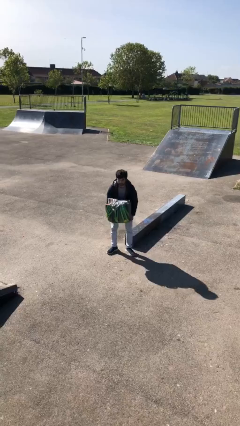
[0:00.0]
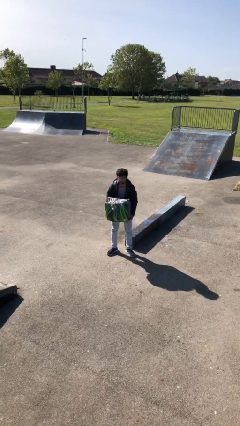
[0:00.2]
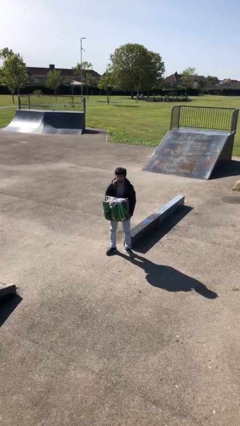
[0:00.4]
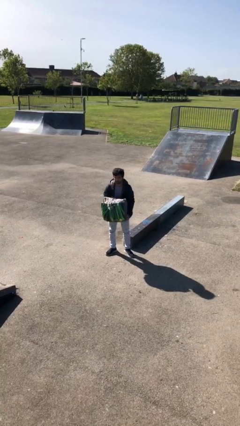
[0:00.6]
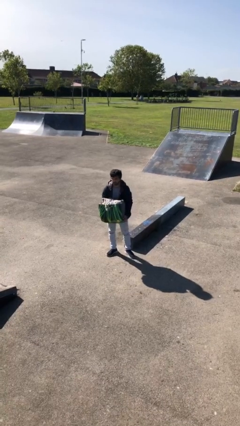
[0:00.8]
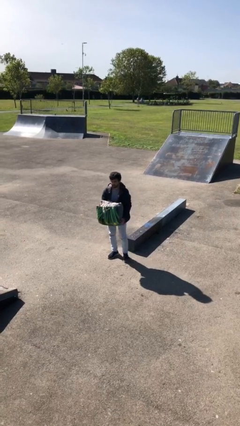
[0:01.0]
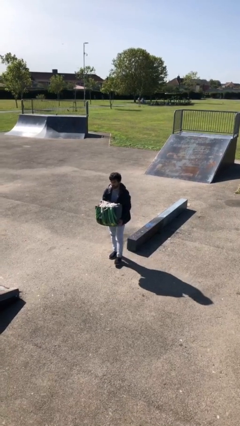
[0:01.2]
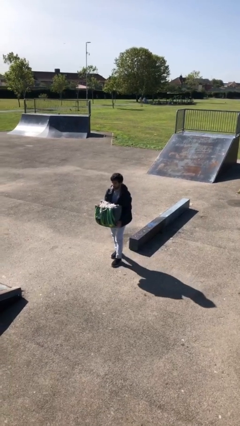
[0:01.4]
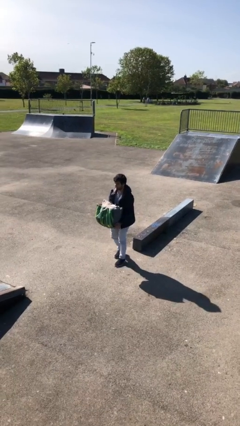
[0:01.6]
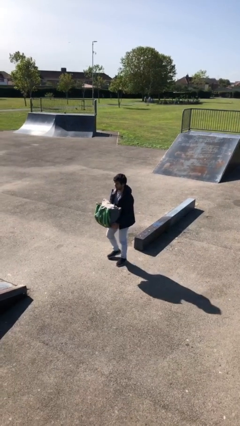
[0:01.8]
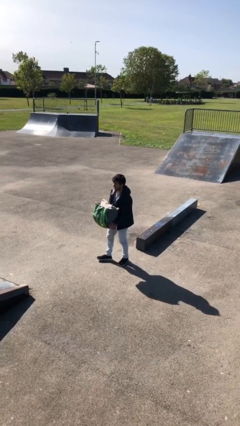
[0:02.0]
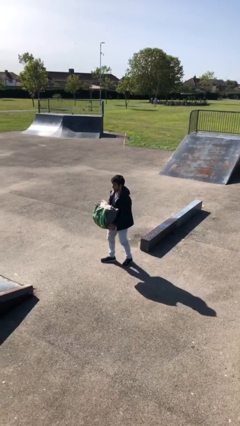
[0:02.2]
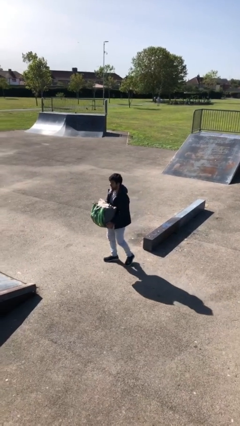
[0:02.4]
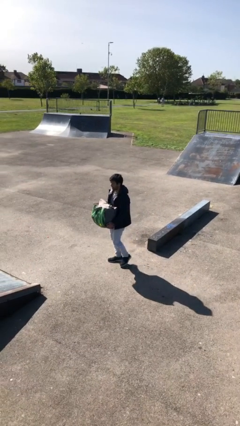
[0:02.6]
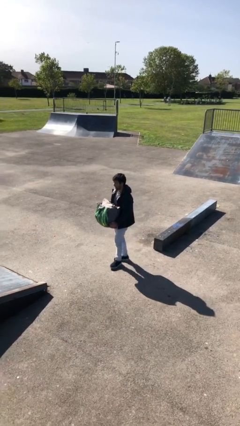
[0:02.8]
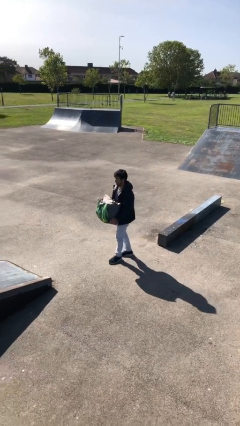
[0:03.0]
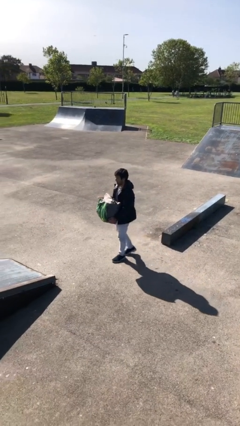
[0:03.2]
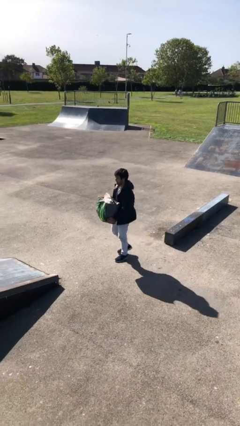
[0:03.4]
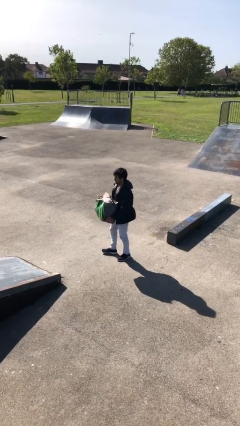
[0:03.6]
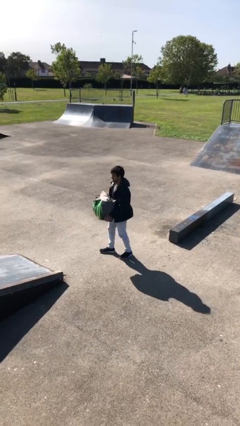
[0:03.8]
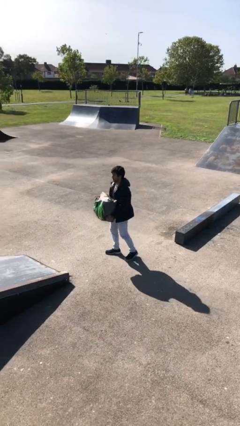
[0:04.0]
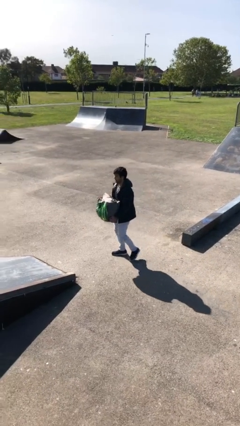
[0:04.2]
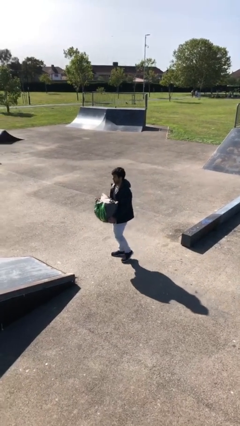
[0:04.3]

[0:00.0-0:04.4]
person carries heavy object

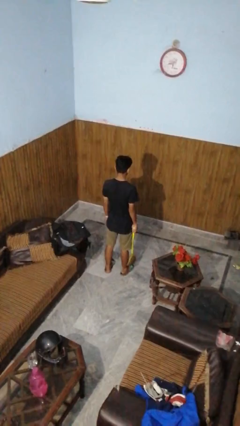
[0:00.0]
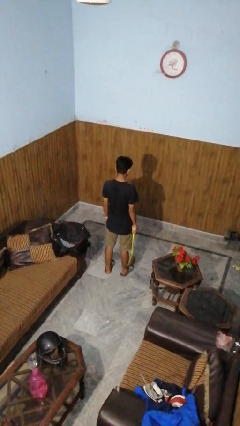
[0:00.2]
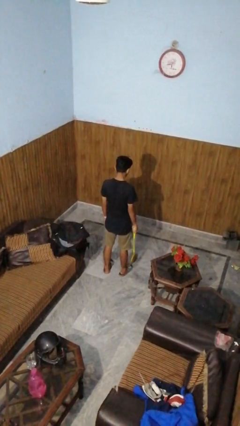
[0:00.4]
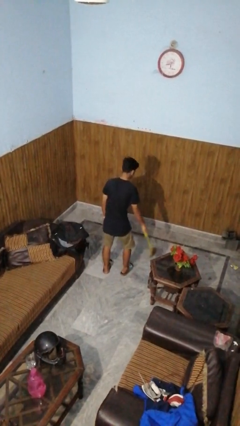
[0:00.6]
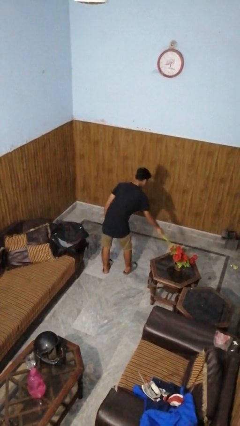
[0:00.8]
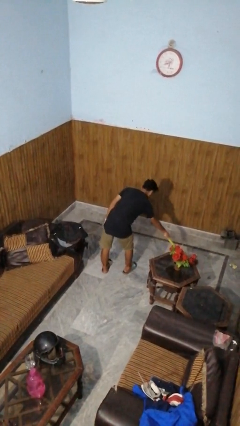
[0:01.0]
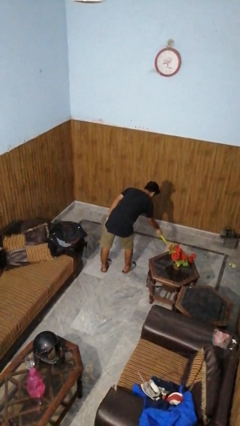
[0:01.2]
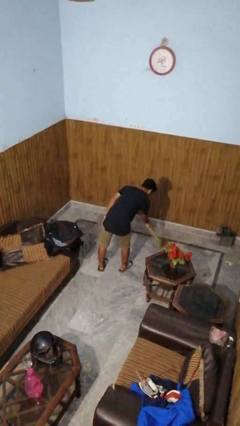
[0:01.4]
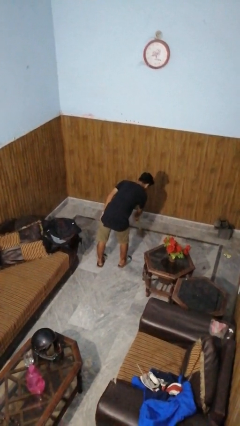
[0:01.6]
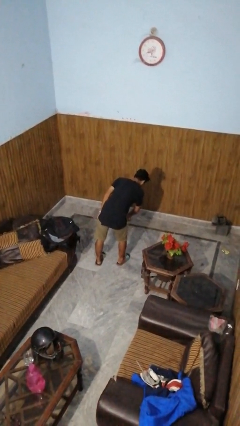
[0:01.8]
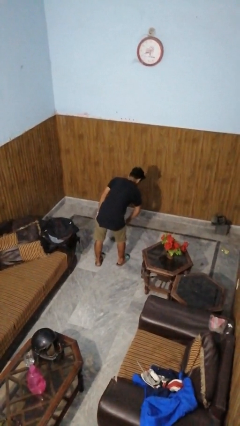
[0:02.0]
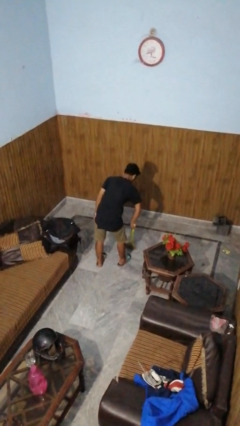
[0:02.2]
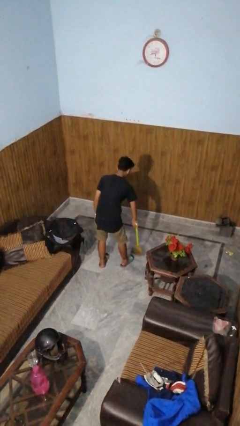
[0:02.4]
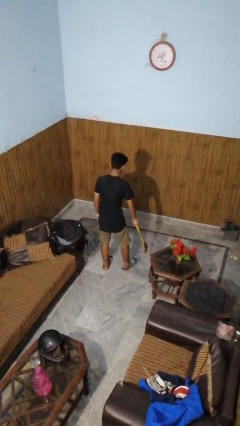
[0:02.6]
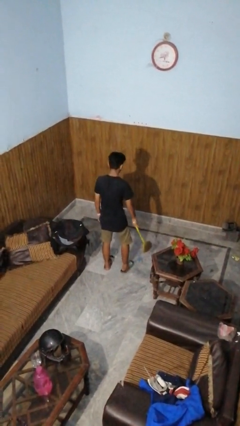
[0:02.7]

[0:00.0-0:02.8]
person sweeps floor

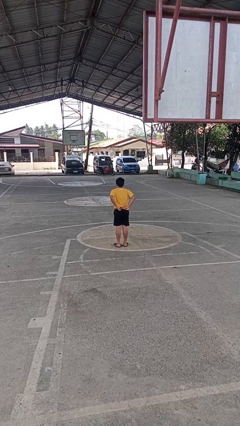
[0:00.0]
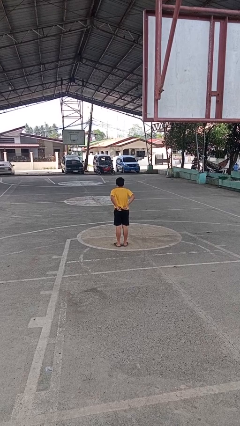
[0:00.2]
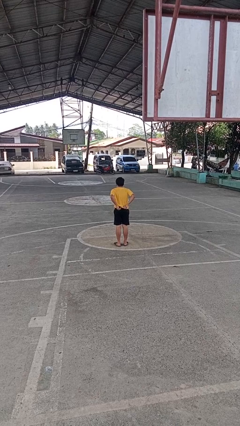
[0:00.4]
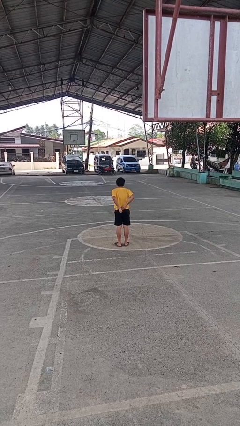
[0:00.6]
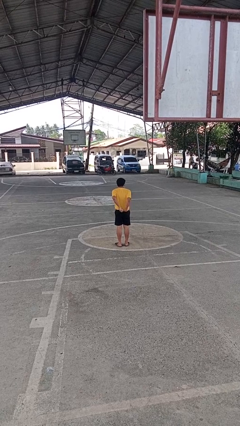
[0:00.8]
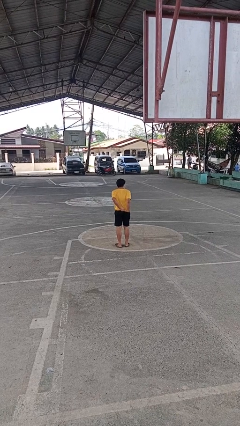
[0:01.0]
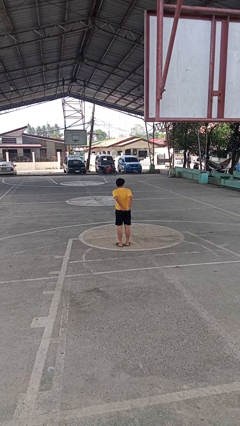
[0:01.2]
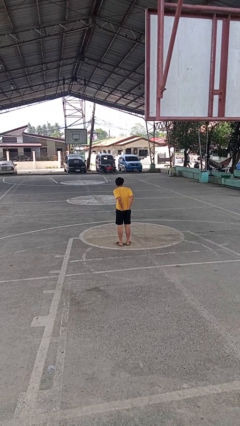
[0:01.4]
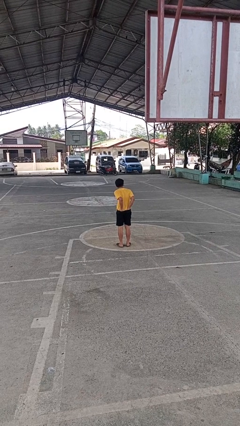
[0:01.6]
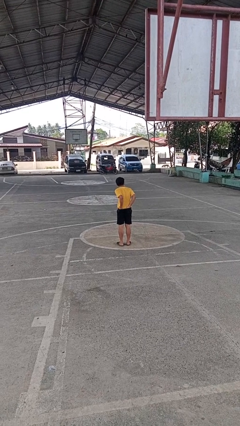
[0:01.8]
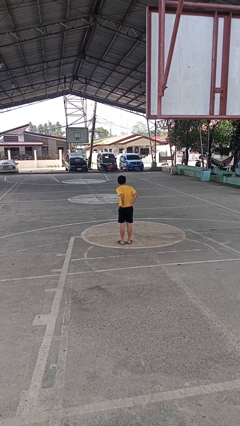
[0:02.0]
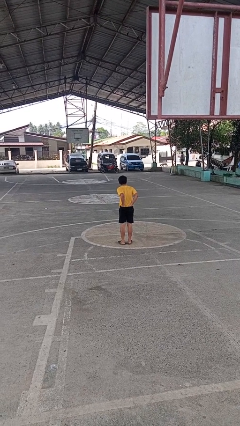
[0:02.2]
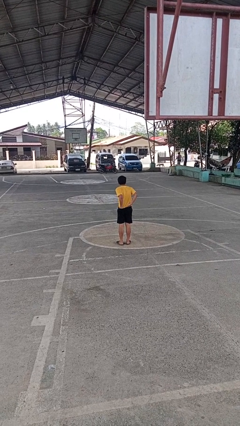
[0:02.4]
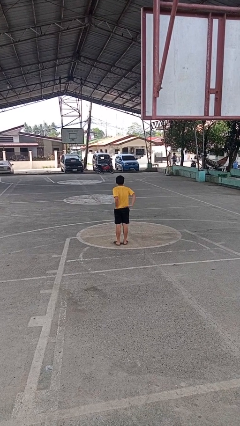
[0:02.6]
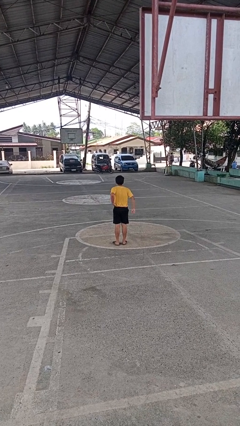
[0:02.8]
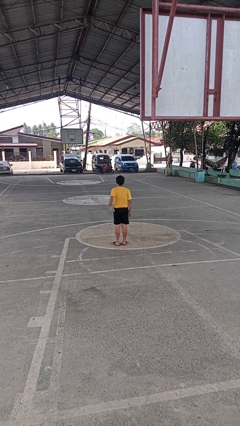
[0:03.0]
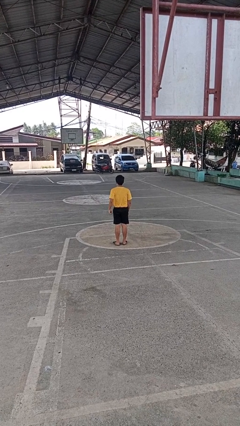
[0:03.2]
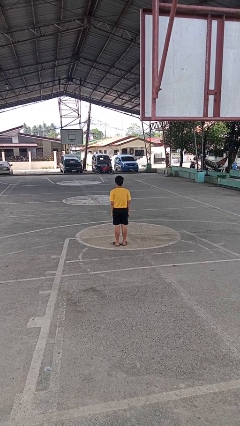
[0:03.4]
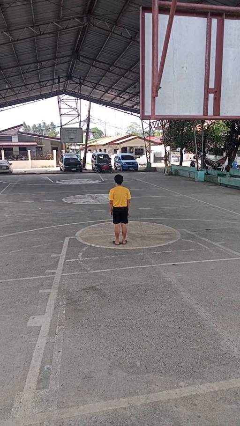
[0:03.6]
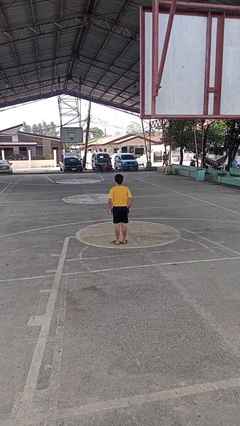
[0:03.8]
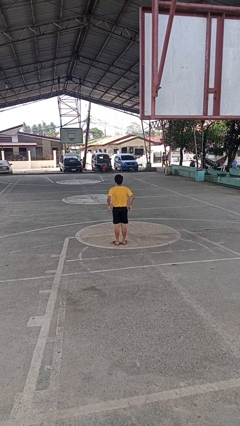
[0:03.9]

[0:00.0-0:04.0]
person tucks in shirt

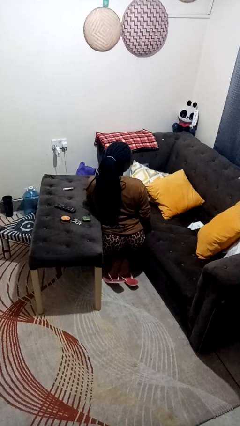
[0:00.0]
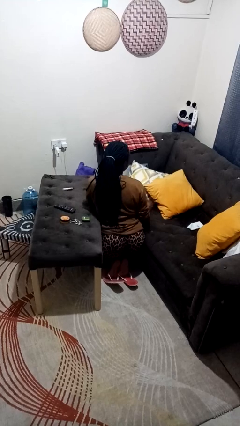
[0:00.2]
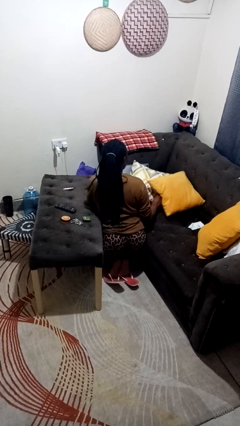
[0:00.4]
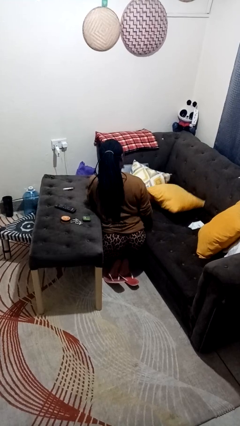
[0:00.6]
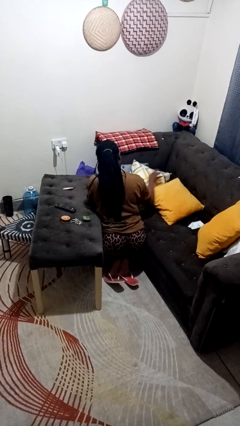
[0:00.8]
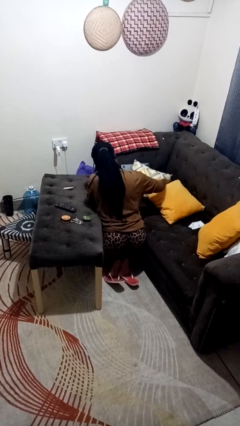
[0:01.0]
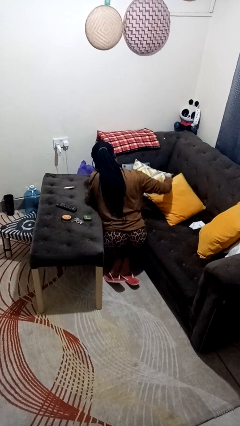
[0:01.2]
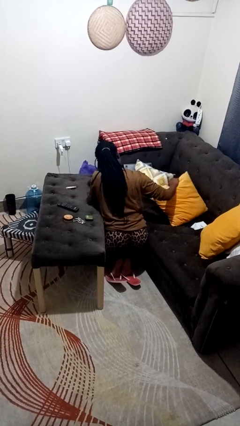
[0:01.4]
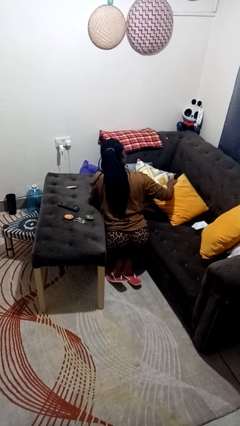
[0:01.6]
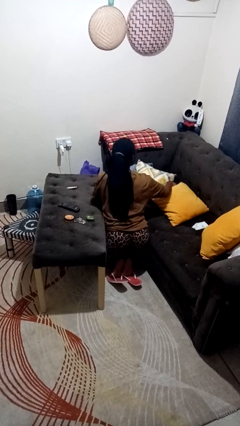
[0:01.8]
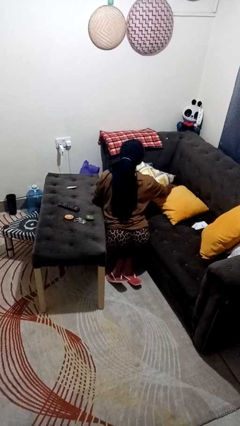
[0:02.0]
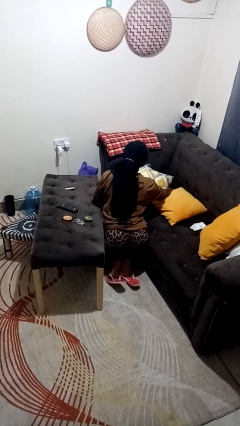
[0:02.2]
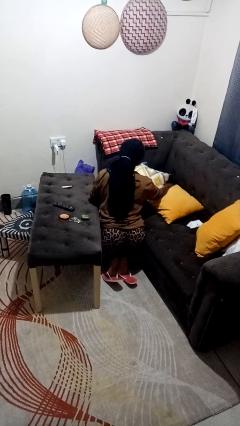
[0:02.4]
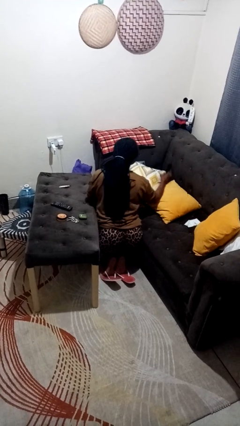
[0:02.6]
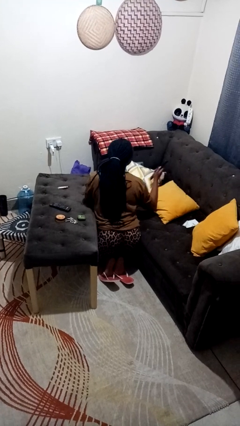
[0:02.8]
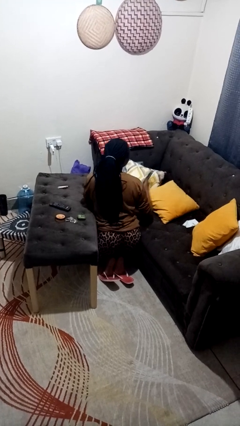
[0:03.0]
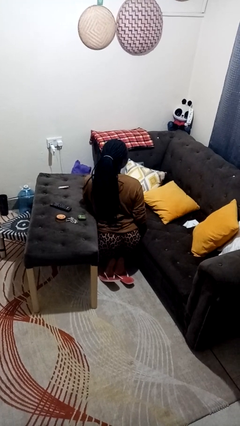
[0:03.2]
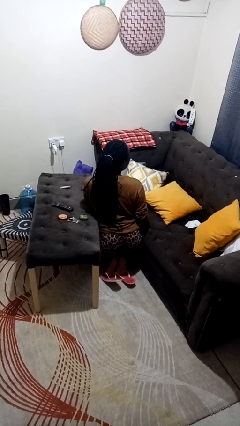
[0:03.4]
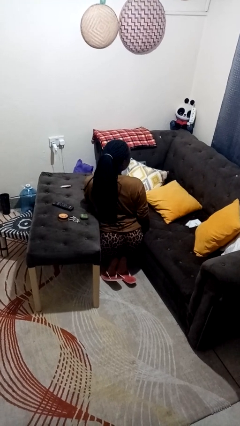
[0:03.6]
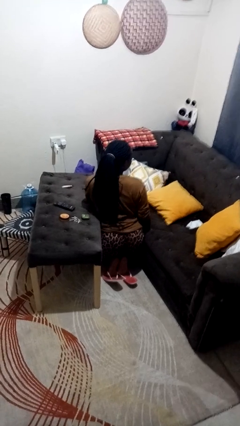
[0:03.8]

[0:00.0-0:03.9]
person searches in couch

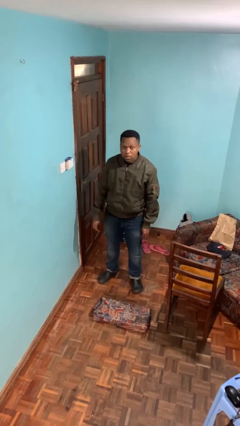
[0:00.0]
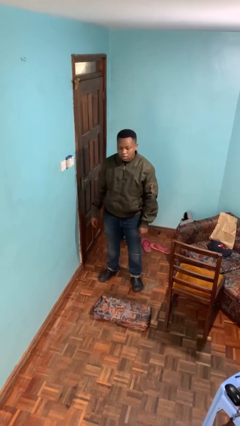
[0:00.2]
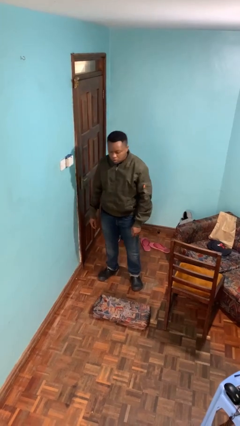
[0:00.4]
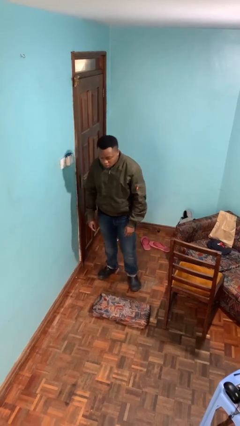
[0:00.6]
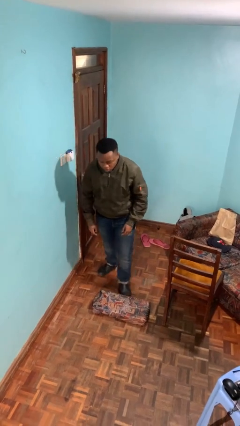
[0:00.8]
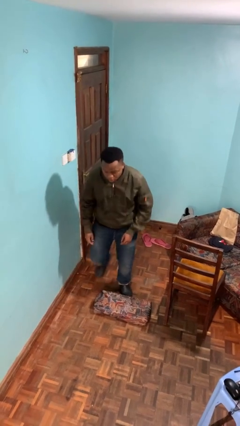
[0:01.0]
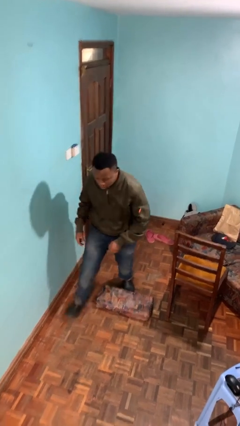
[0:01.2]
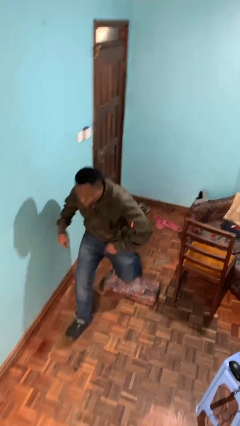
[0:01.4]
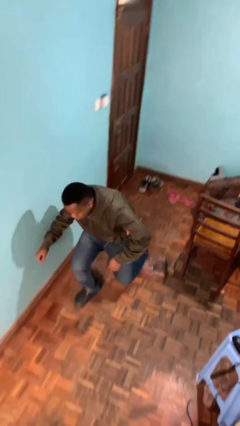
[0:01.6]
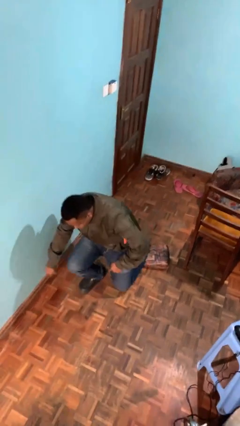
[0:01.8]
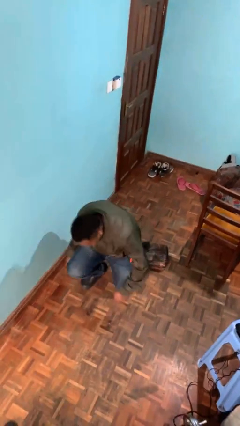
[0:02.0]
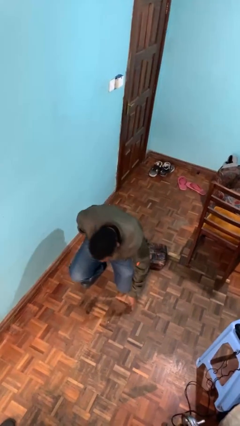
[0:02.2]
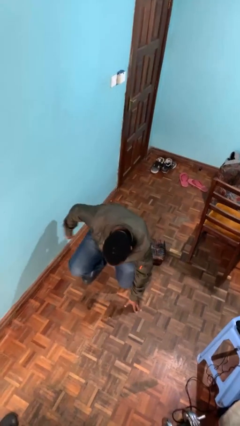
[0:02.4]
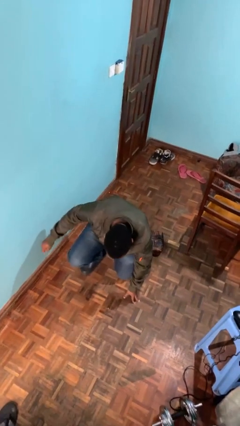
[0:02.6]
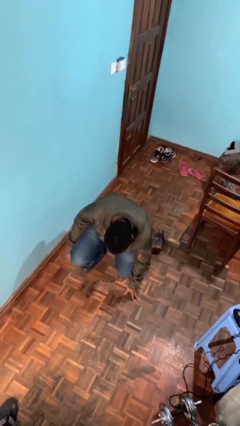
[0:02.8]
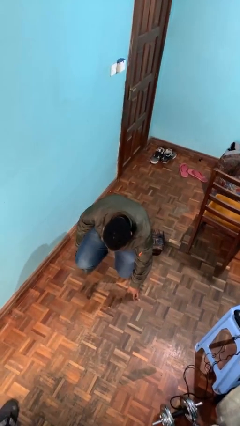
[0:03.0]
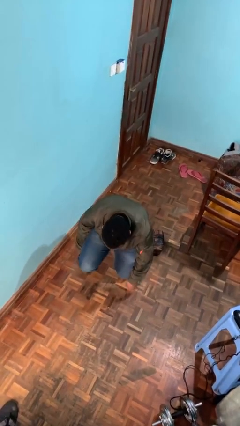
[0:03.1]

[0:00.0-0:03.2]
person trips on object on floor
